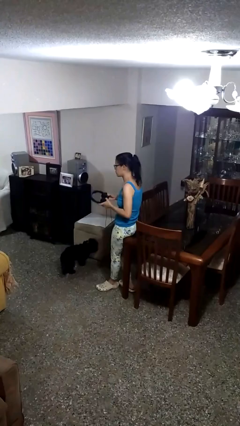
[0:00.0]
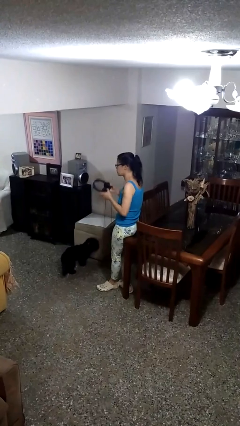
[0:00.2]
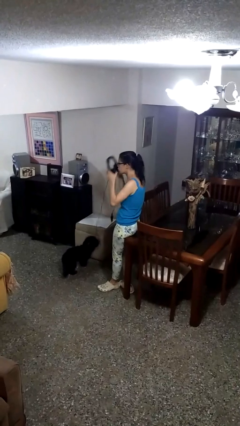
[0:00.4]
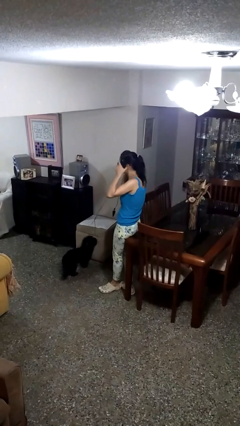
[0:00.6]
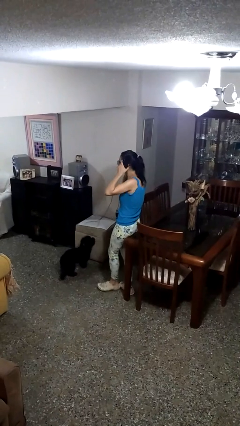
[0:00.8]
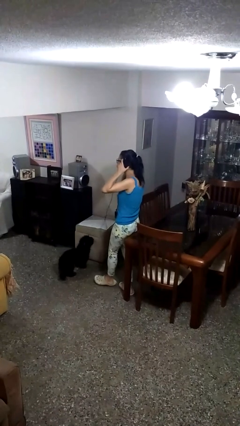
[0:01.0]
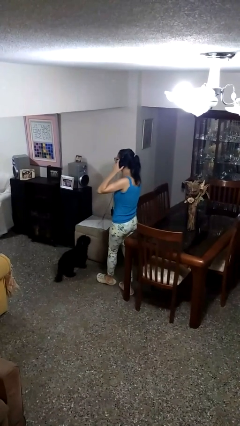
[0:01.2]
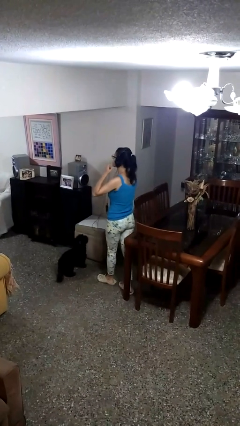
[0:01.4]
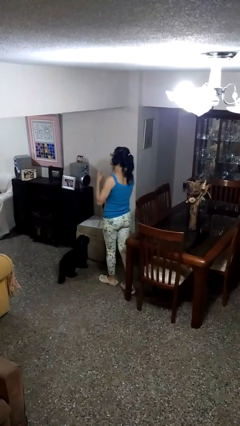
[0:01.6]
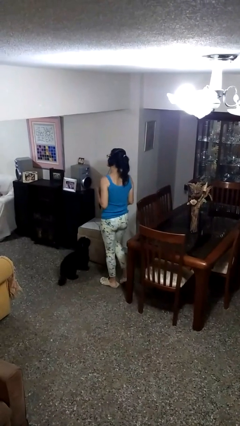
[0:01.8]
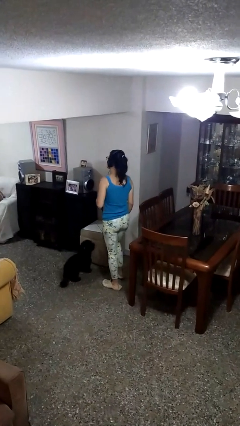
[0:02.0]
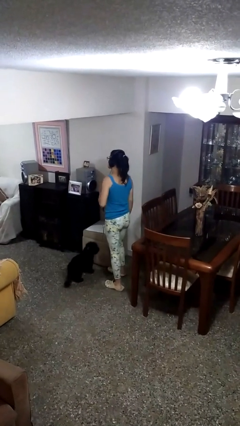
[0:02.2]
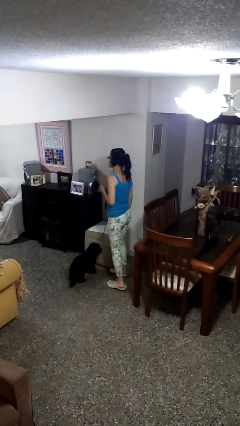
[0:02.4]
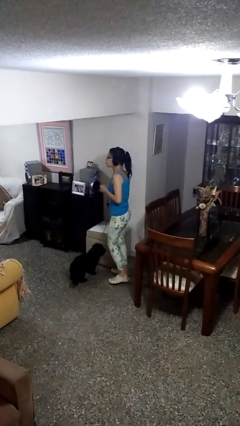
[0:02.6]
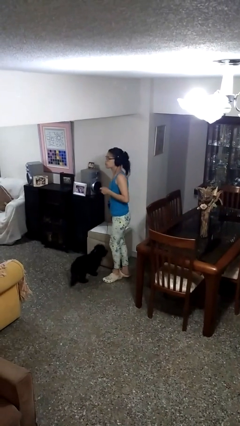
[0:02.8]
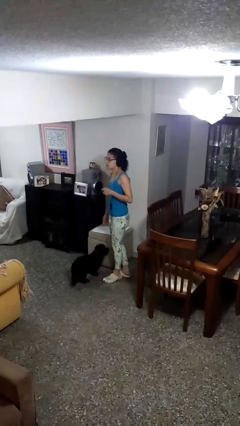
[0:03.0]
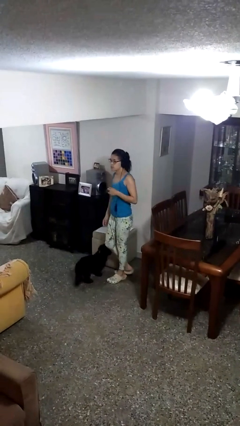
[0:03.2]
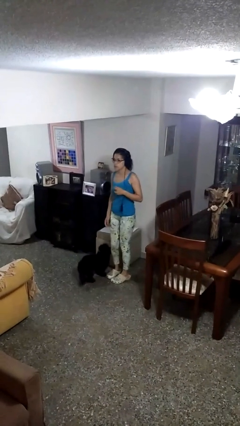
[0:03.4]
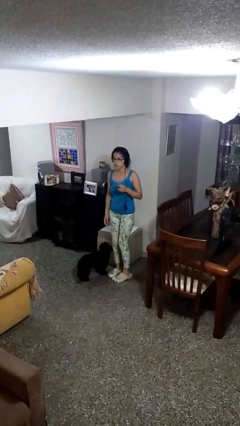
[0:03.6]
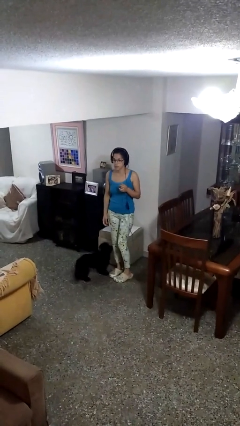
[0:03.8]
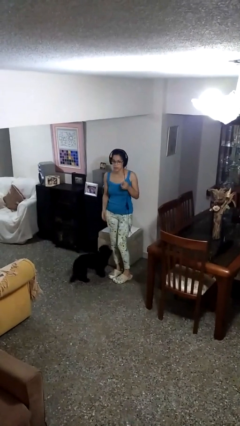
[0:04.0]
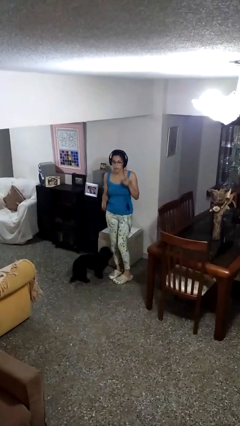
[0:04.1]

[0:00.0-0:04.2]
person puts on headphones

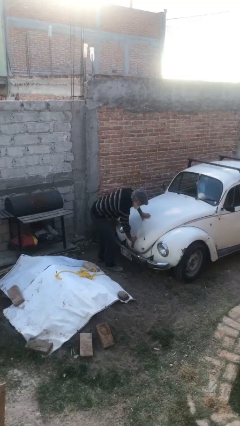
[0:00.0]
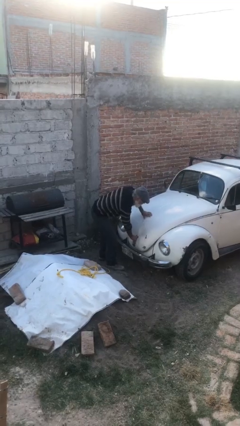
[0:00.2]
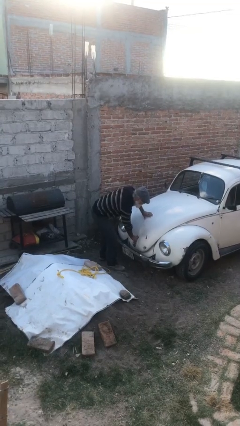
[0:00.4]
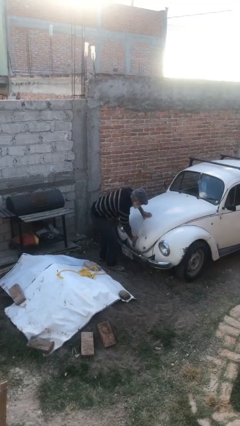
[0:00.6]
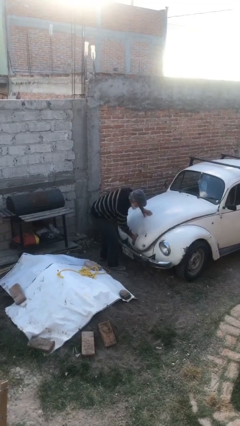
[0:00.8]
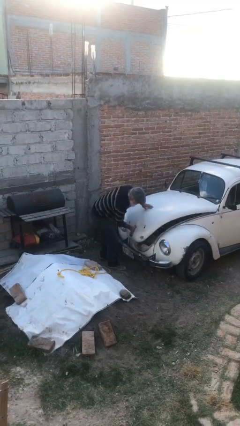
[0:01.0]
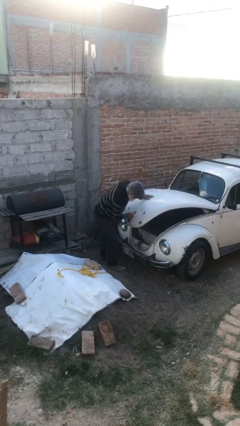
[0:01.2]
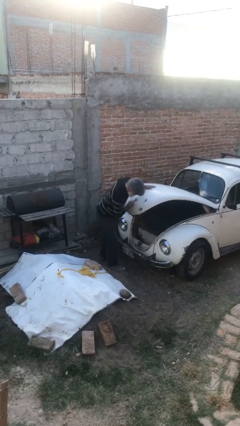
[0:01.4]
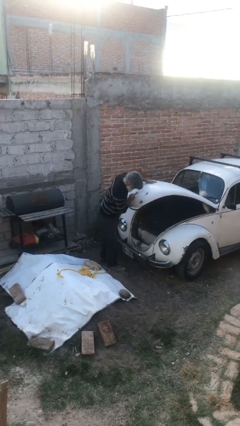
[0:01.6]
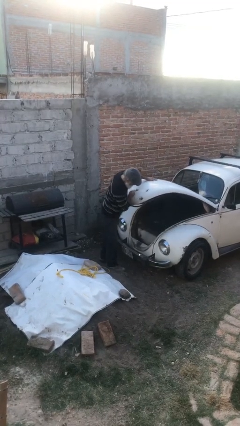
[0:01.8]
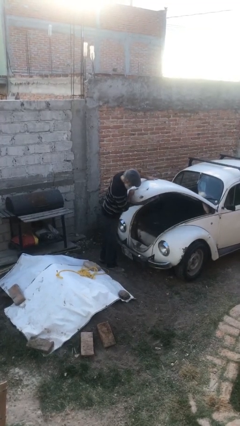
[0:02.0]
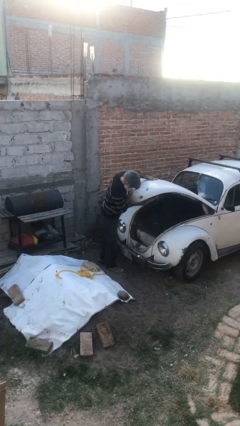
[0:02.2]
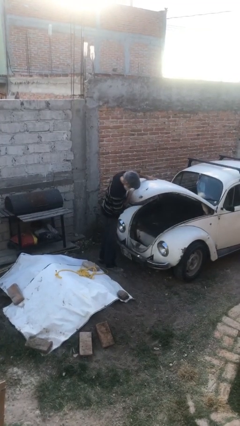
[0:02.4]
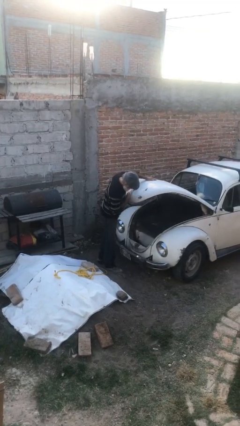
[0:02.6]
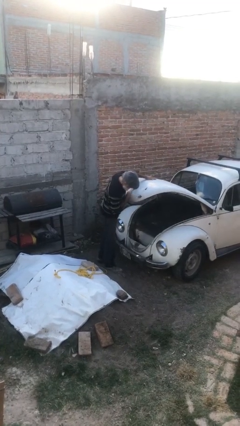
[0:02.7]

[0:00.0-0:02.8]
person opens car trunk

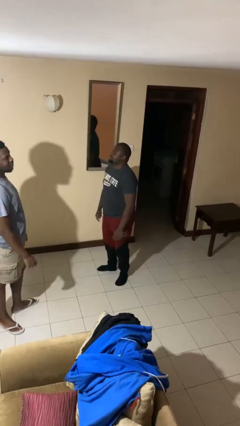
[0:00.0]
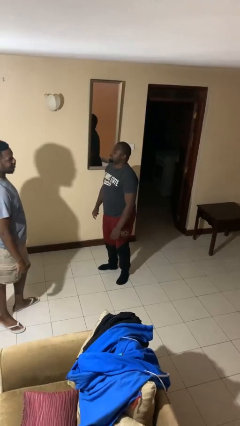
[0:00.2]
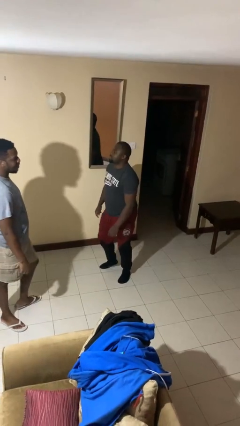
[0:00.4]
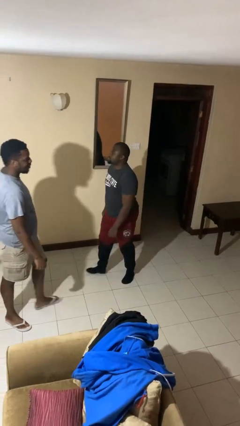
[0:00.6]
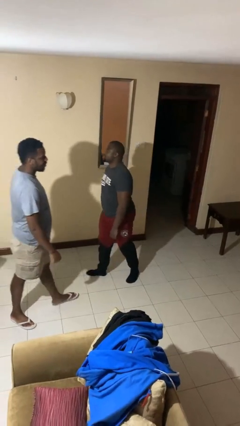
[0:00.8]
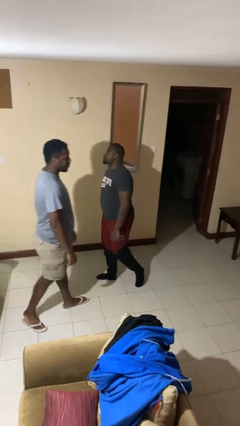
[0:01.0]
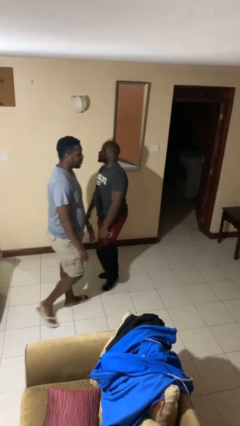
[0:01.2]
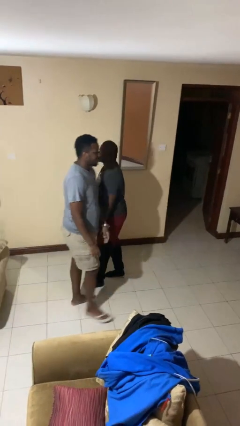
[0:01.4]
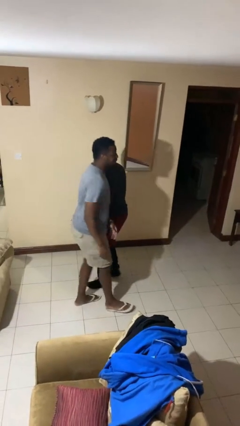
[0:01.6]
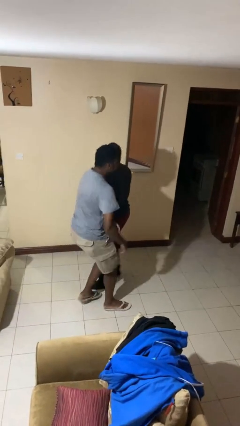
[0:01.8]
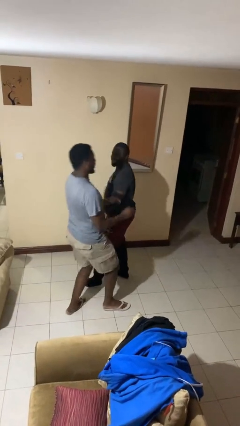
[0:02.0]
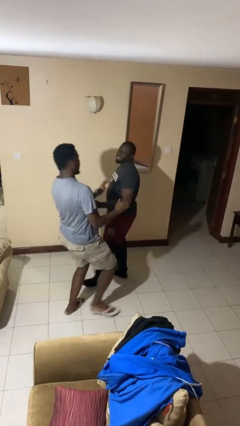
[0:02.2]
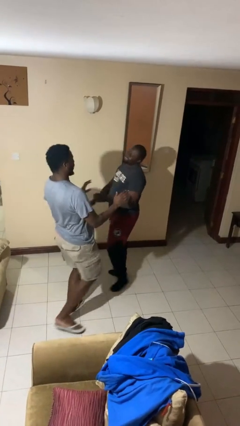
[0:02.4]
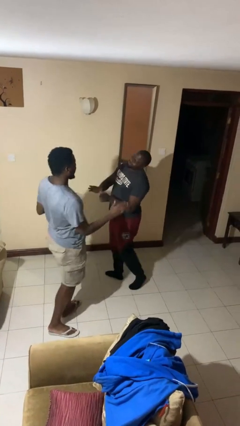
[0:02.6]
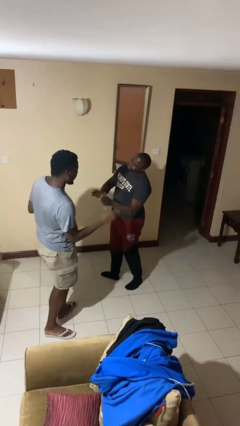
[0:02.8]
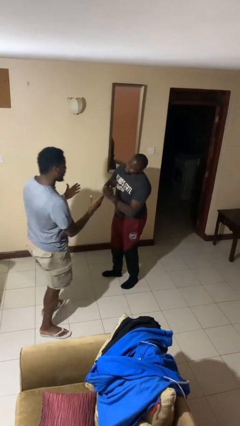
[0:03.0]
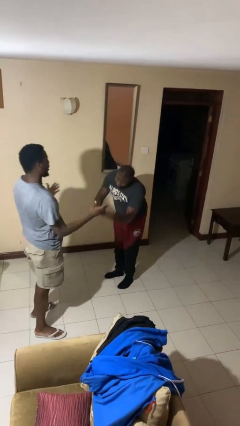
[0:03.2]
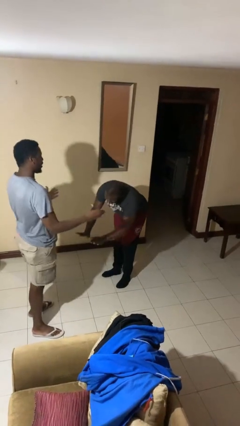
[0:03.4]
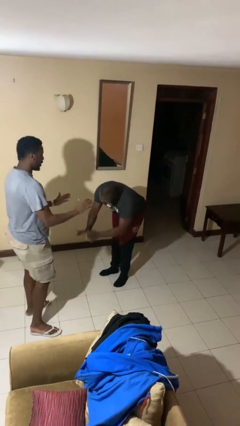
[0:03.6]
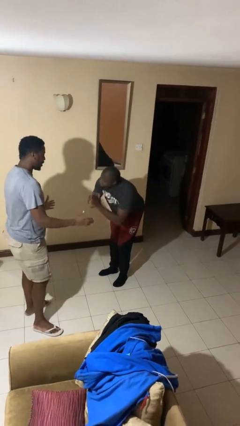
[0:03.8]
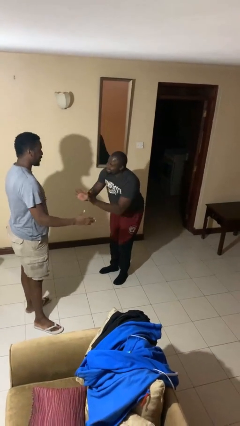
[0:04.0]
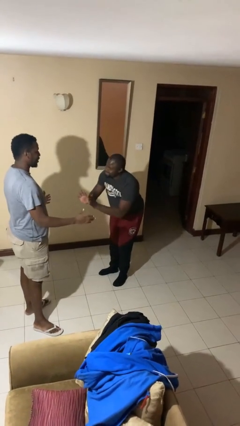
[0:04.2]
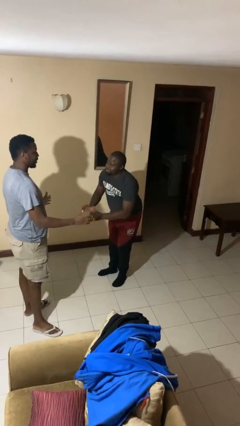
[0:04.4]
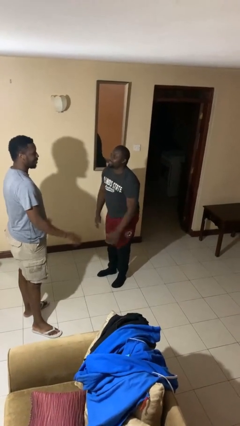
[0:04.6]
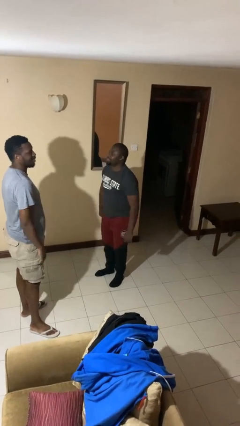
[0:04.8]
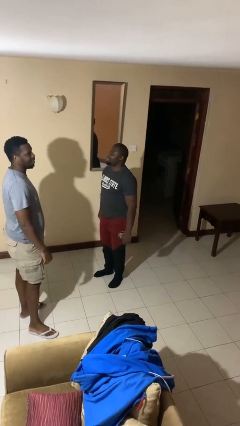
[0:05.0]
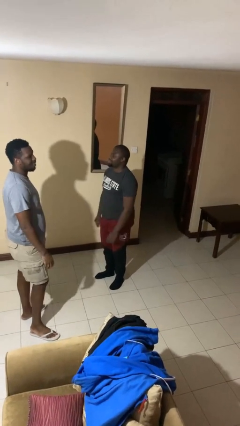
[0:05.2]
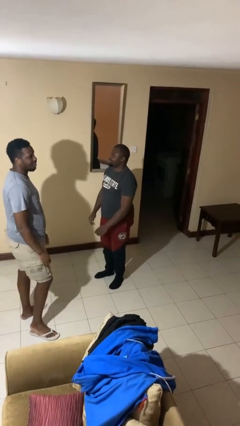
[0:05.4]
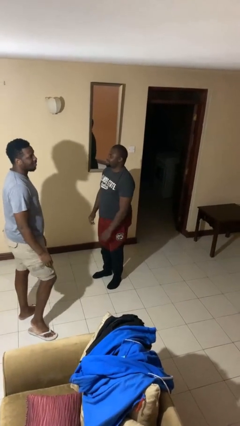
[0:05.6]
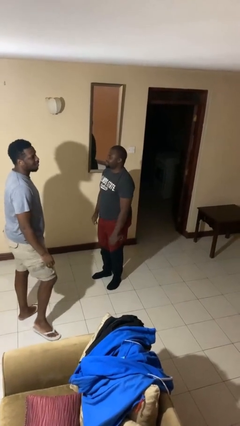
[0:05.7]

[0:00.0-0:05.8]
person bumps into person

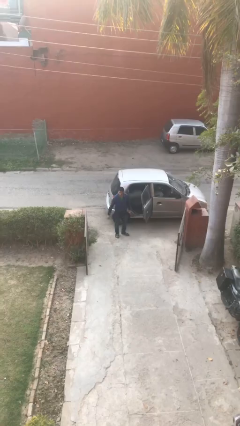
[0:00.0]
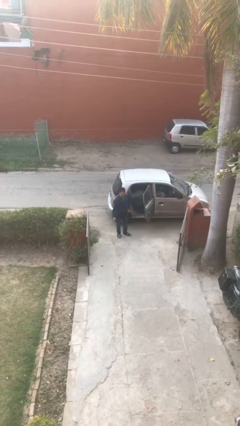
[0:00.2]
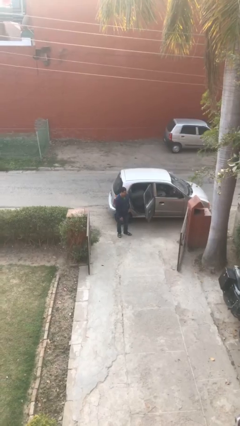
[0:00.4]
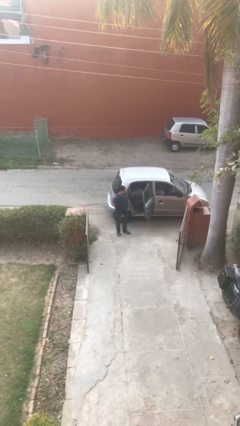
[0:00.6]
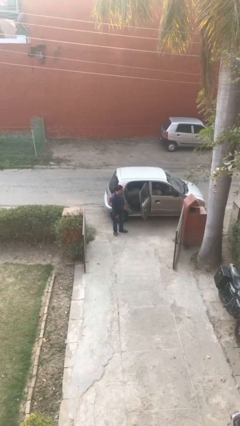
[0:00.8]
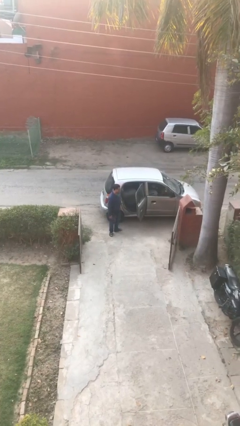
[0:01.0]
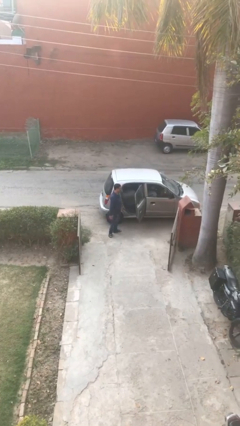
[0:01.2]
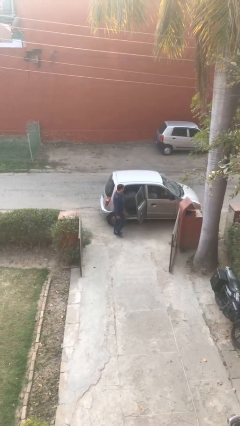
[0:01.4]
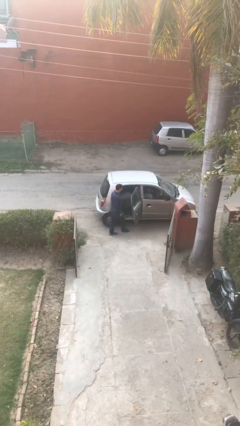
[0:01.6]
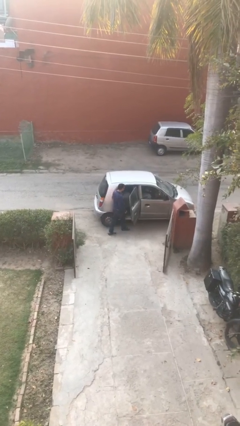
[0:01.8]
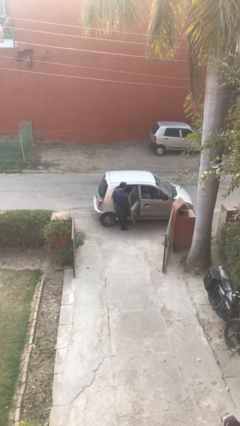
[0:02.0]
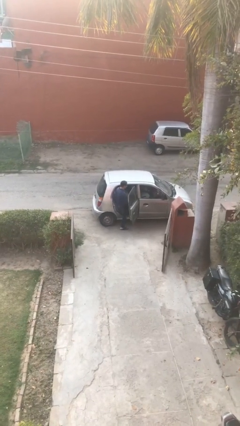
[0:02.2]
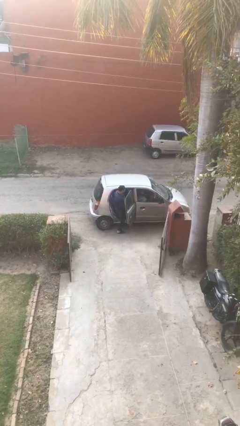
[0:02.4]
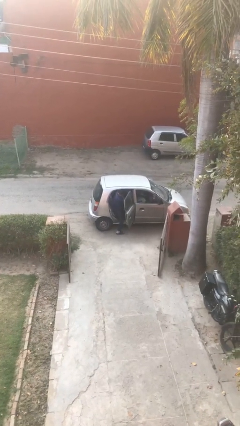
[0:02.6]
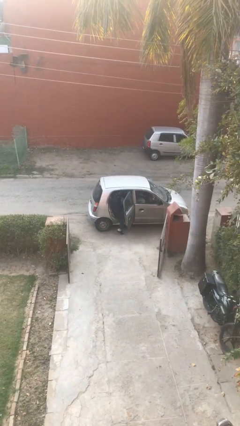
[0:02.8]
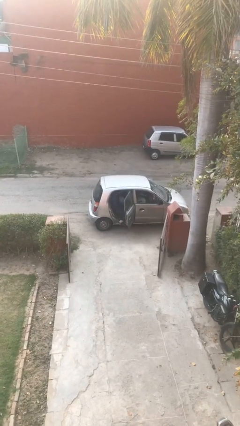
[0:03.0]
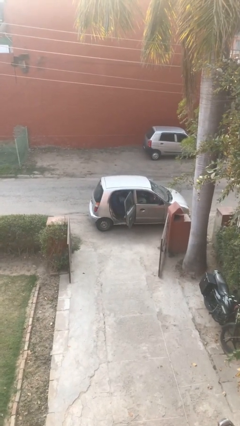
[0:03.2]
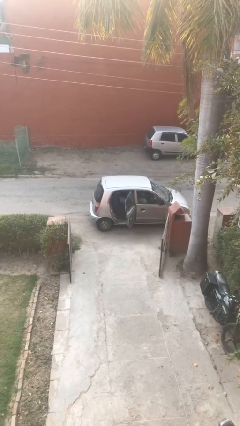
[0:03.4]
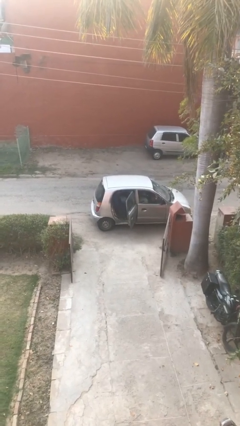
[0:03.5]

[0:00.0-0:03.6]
person enters car

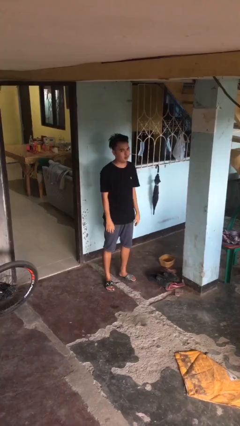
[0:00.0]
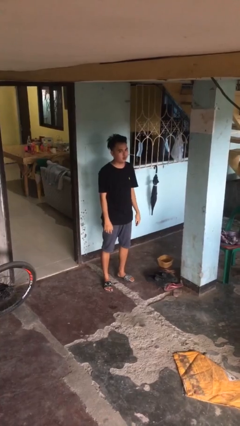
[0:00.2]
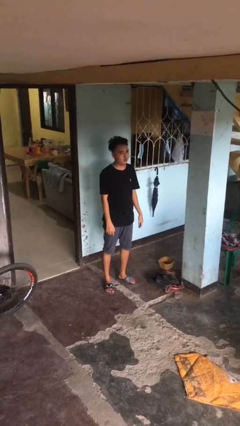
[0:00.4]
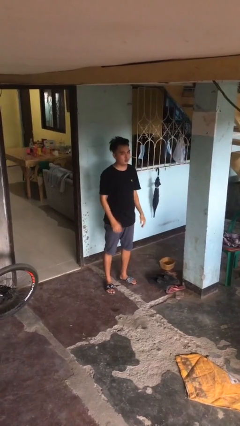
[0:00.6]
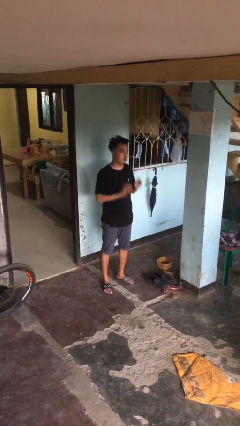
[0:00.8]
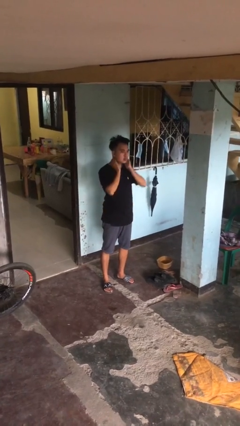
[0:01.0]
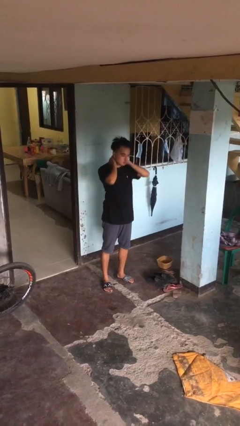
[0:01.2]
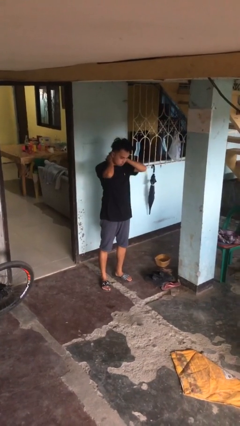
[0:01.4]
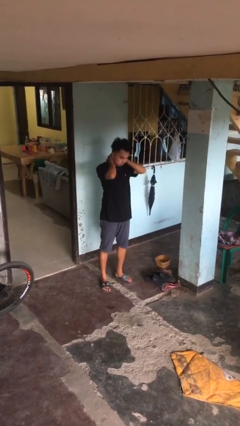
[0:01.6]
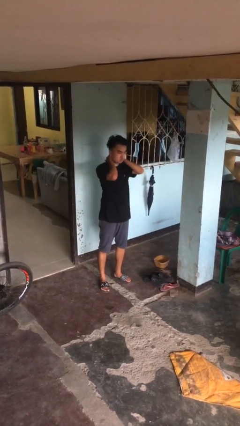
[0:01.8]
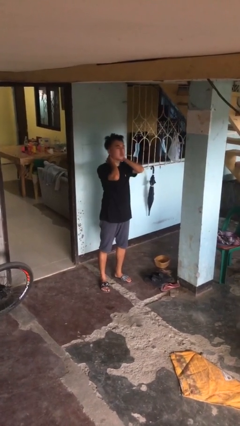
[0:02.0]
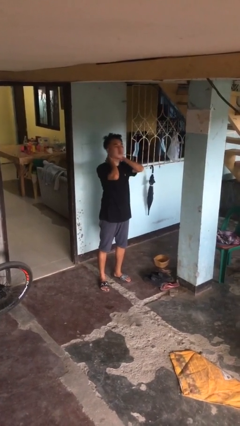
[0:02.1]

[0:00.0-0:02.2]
person rubs neck
